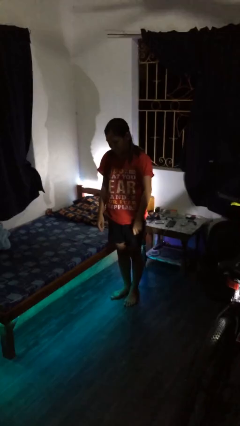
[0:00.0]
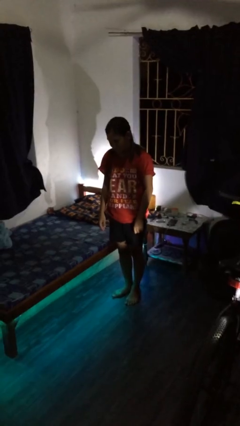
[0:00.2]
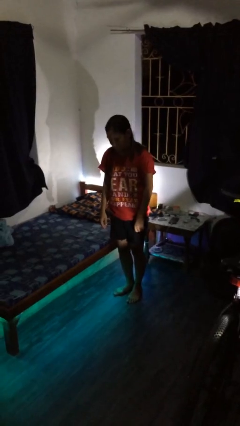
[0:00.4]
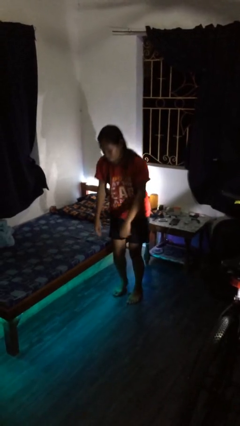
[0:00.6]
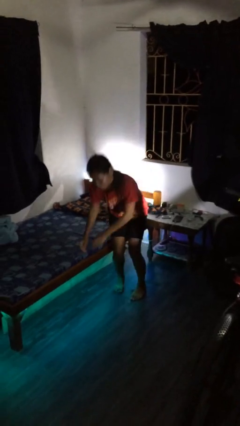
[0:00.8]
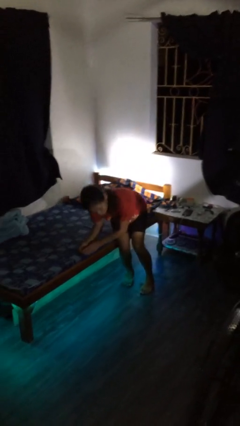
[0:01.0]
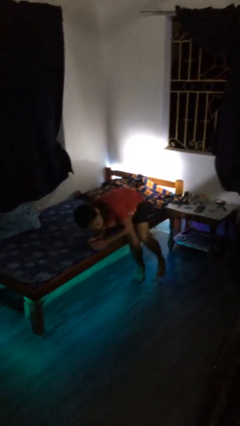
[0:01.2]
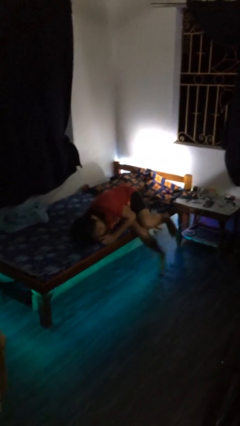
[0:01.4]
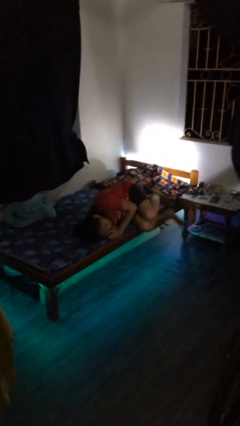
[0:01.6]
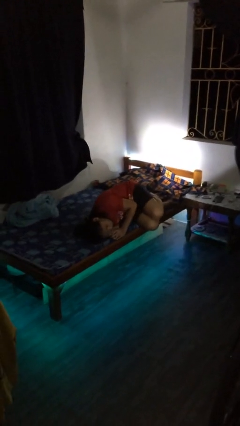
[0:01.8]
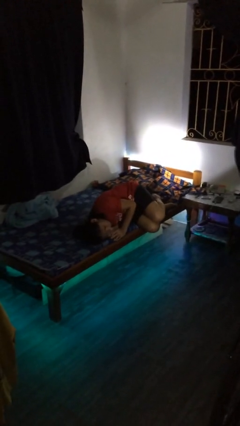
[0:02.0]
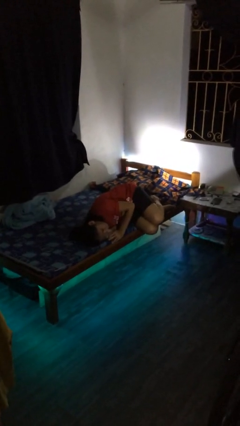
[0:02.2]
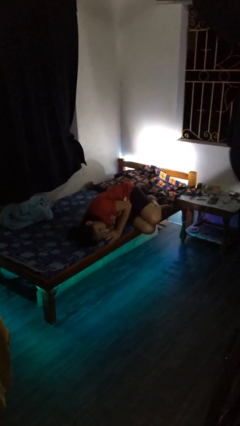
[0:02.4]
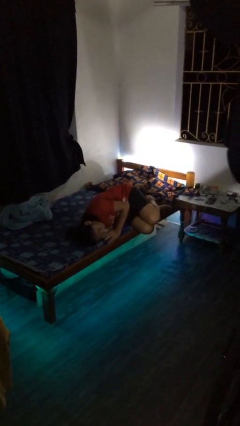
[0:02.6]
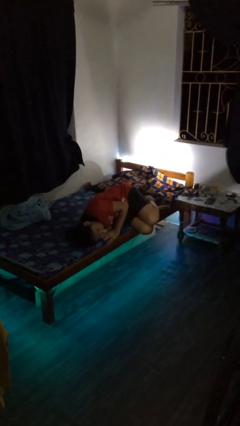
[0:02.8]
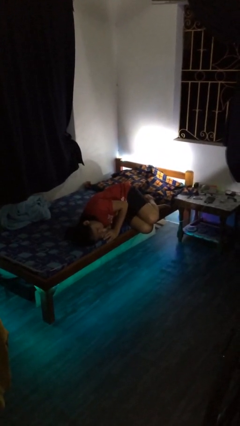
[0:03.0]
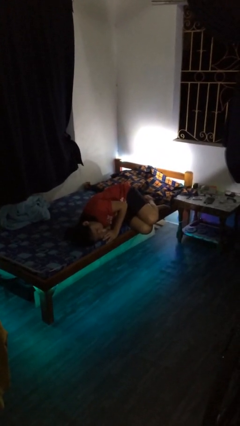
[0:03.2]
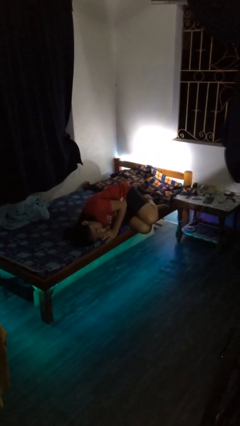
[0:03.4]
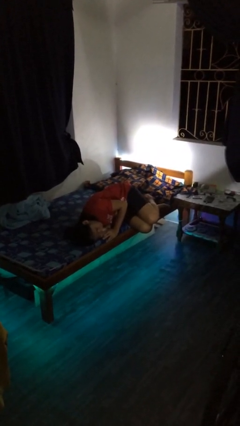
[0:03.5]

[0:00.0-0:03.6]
person lies down on bed

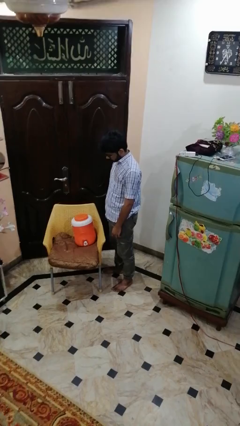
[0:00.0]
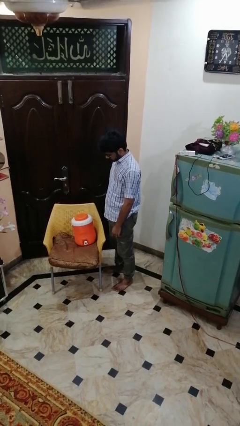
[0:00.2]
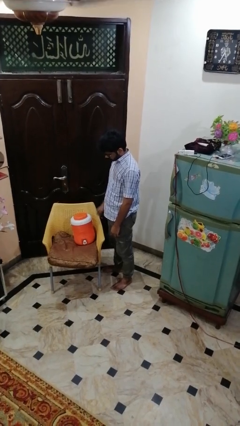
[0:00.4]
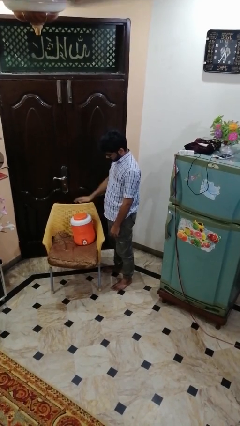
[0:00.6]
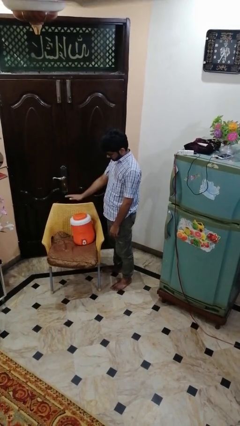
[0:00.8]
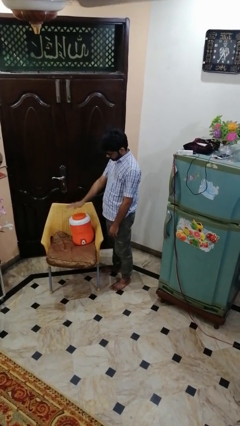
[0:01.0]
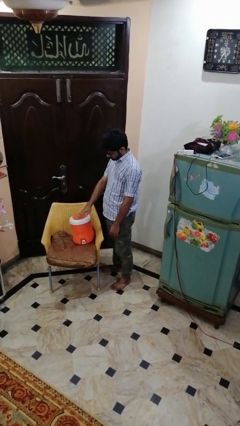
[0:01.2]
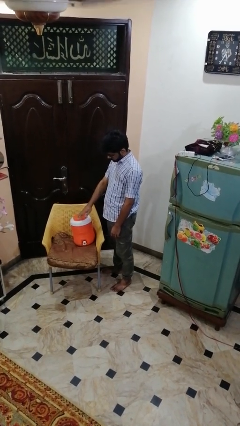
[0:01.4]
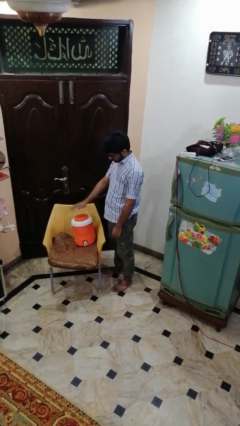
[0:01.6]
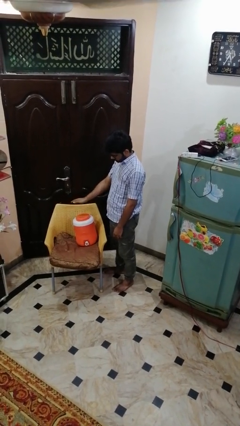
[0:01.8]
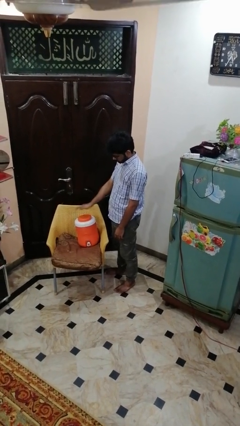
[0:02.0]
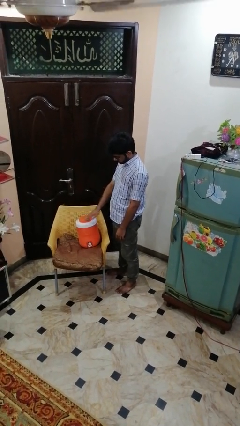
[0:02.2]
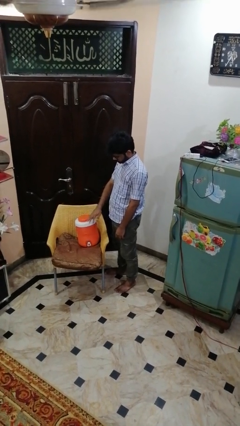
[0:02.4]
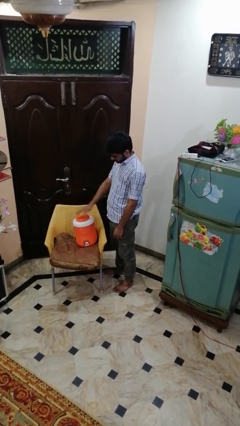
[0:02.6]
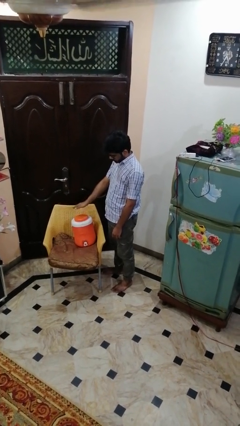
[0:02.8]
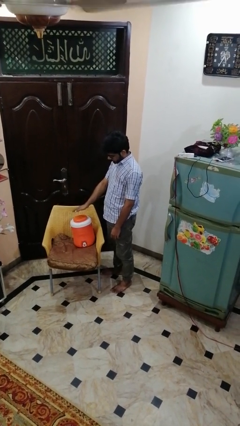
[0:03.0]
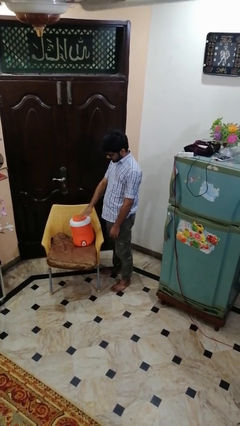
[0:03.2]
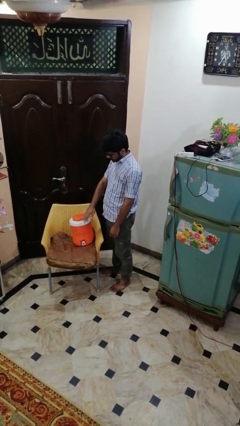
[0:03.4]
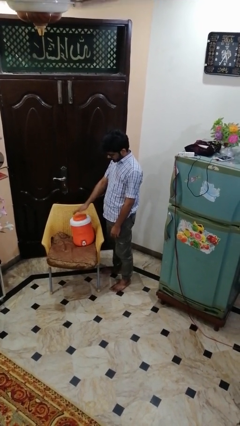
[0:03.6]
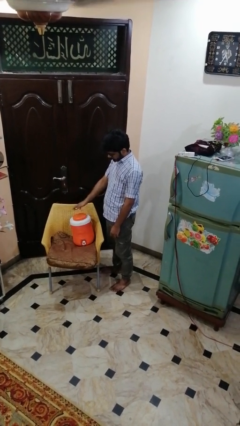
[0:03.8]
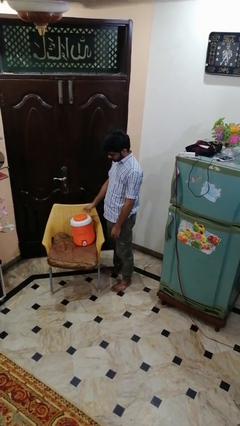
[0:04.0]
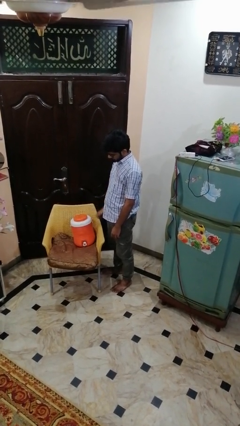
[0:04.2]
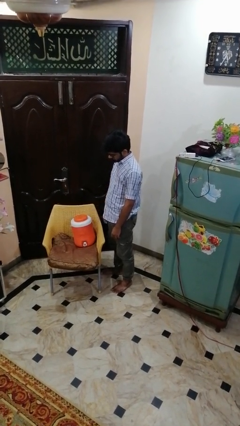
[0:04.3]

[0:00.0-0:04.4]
person waves hand over object

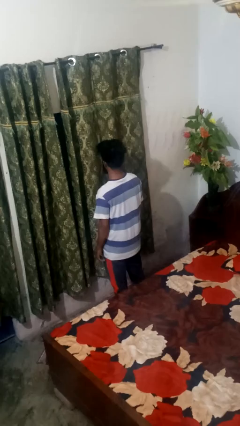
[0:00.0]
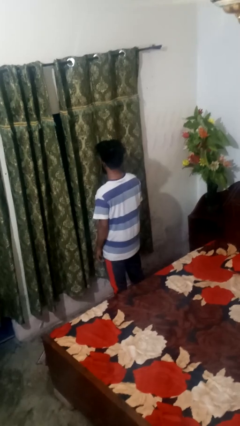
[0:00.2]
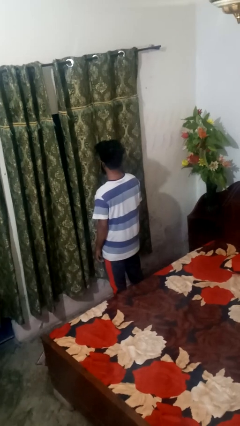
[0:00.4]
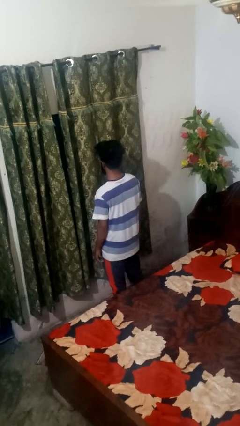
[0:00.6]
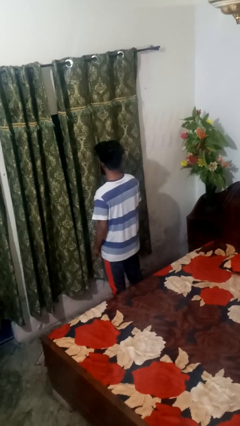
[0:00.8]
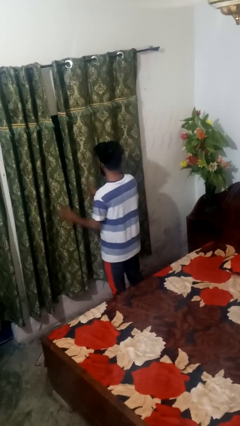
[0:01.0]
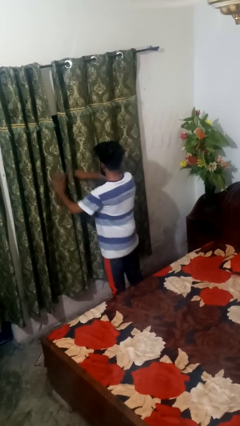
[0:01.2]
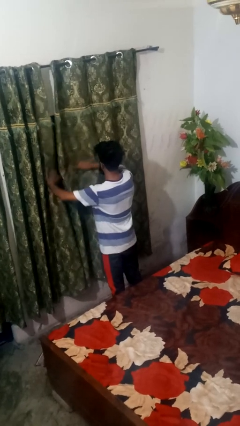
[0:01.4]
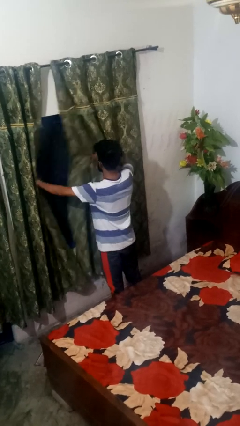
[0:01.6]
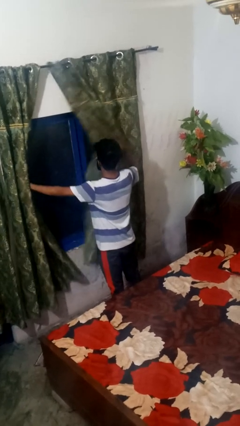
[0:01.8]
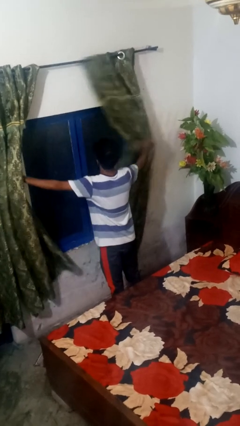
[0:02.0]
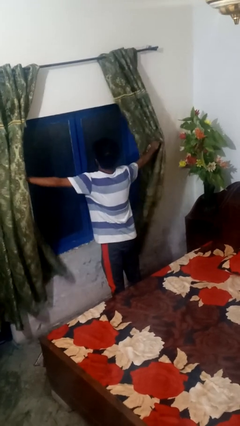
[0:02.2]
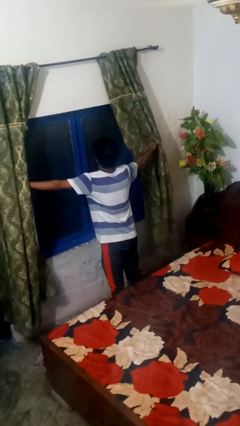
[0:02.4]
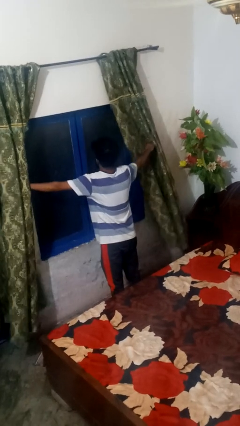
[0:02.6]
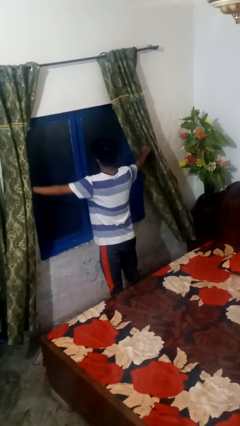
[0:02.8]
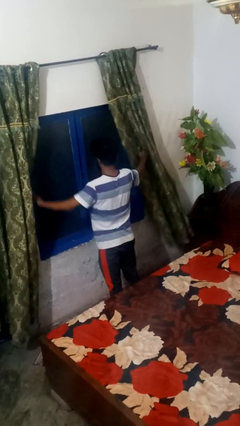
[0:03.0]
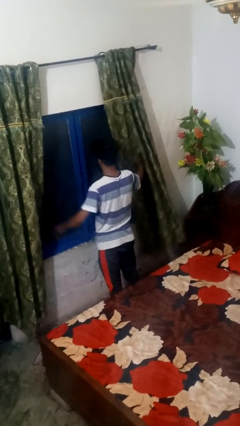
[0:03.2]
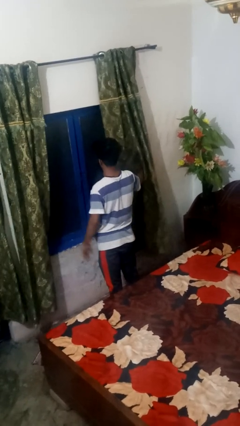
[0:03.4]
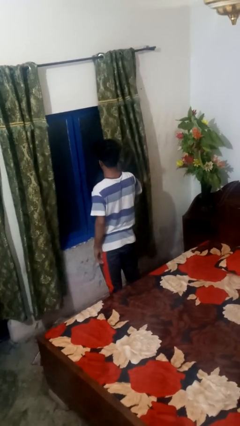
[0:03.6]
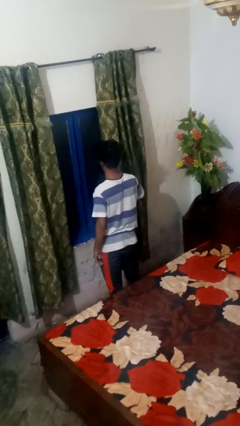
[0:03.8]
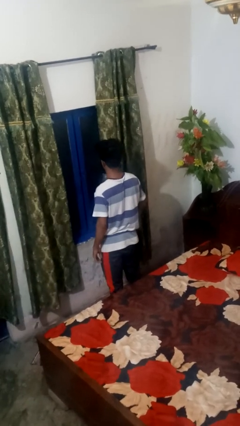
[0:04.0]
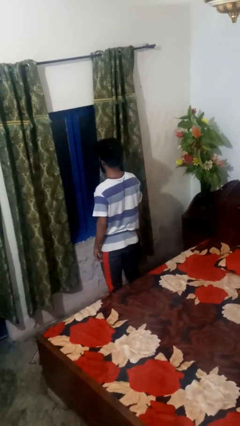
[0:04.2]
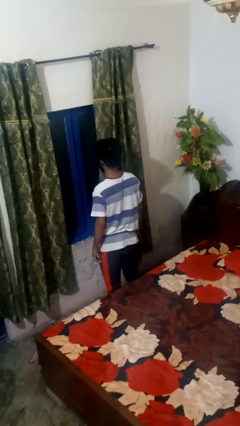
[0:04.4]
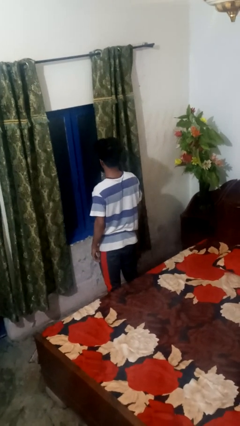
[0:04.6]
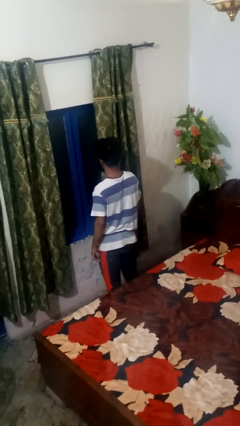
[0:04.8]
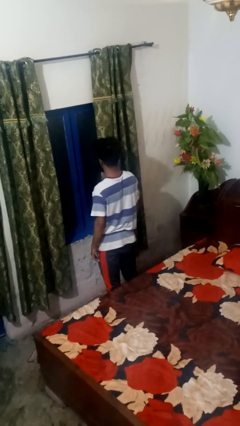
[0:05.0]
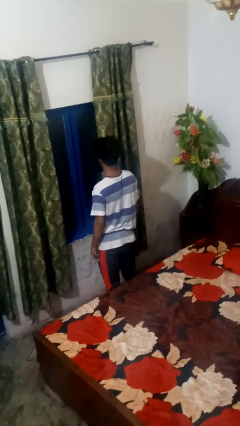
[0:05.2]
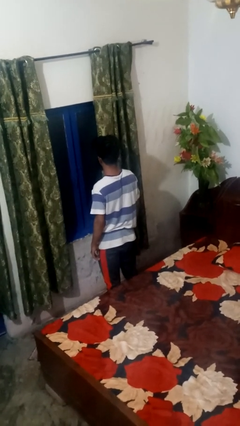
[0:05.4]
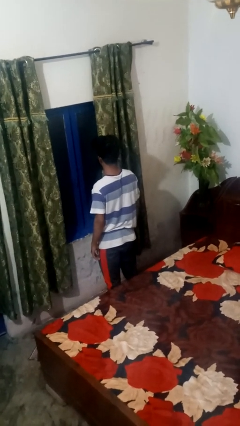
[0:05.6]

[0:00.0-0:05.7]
person opens curtains

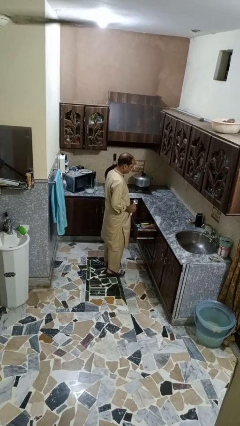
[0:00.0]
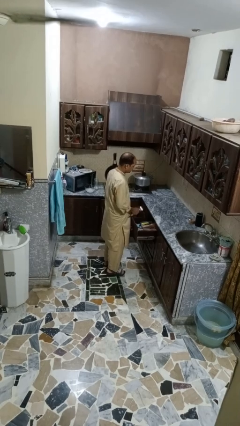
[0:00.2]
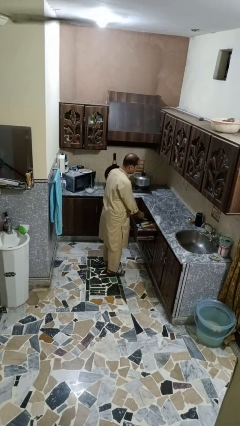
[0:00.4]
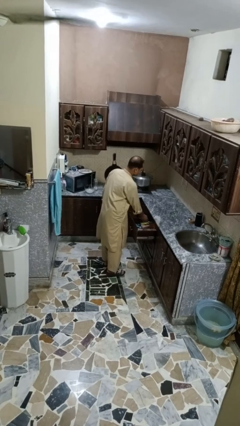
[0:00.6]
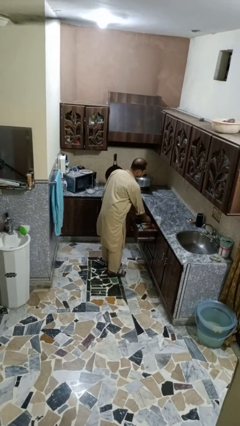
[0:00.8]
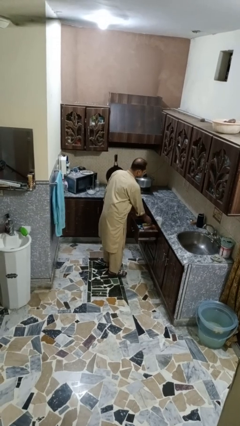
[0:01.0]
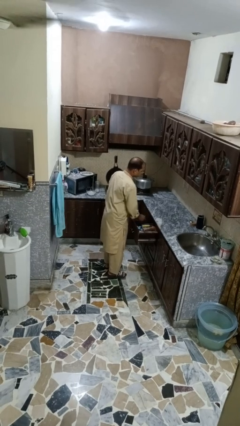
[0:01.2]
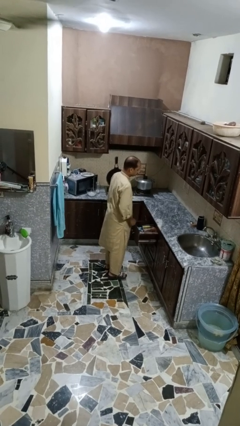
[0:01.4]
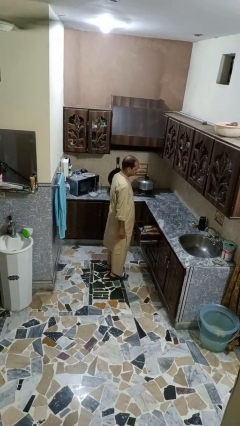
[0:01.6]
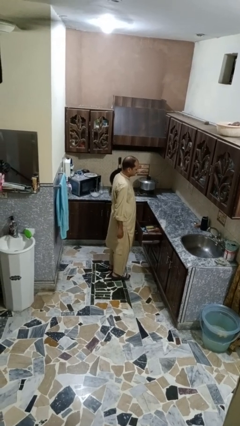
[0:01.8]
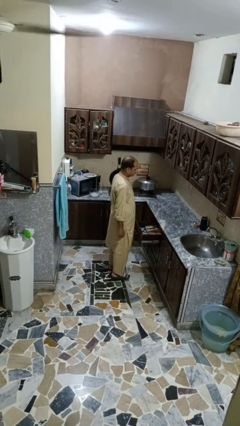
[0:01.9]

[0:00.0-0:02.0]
person puts object into kitchen drawer

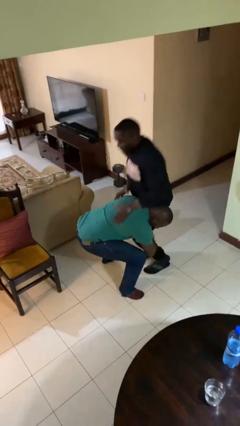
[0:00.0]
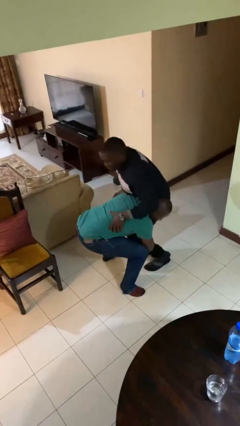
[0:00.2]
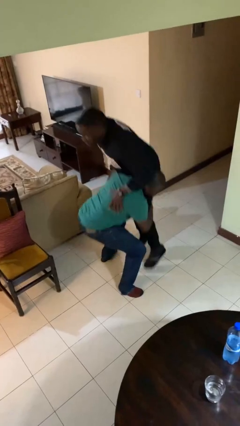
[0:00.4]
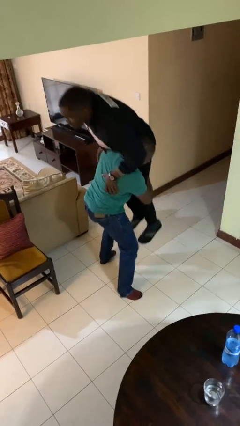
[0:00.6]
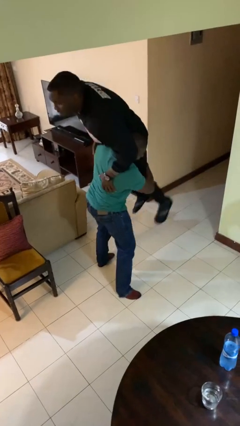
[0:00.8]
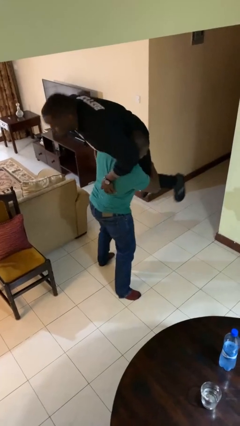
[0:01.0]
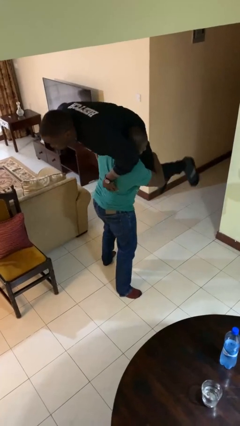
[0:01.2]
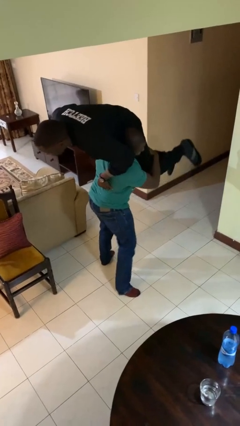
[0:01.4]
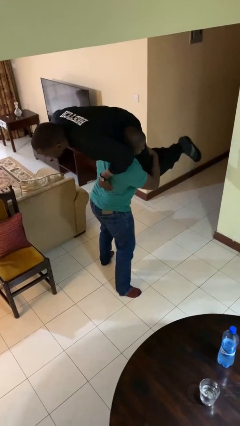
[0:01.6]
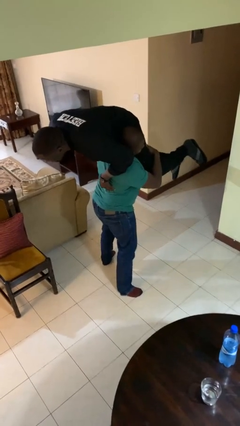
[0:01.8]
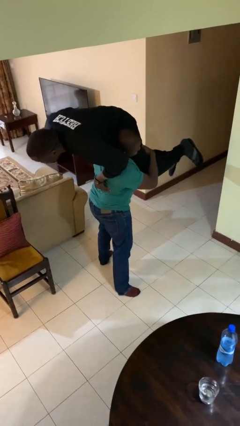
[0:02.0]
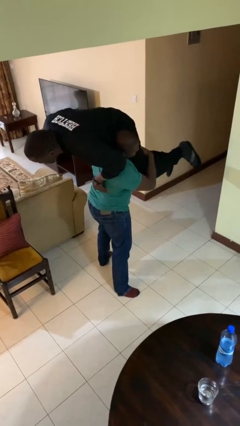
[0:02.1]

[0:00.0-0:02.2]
person carries person over shoulder
